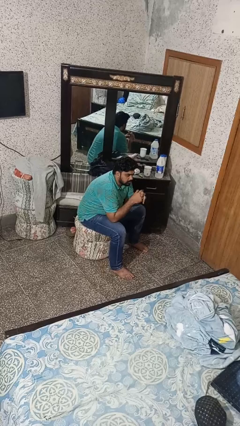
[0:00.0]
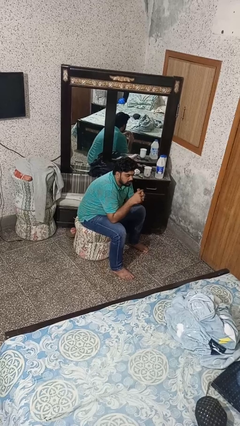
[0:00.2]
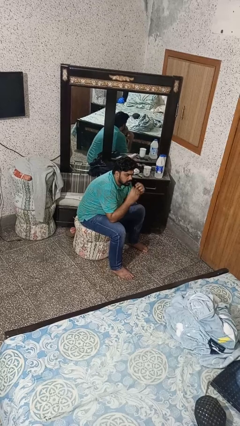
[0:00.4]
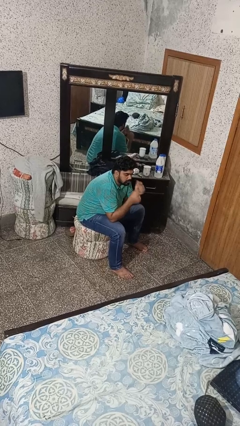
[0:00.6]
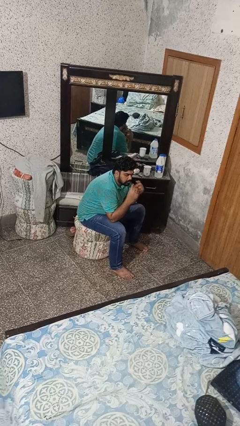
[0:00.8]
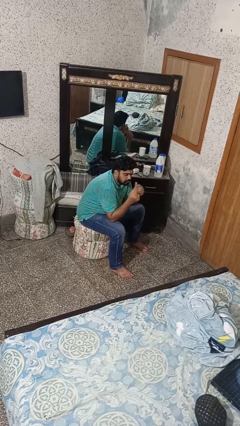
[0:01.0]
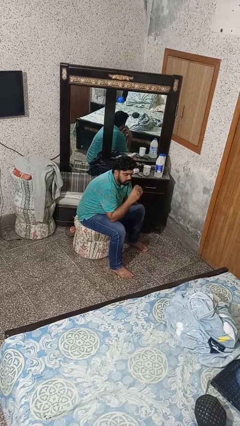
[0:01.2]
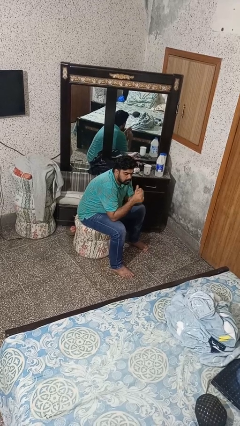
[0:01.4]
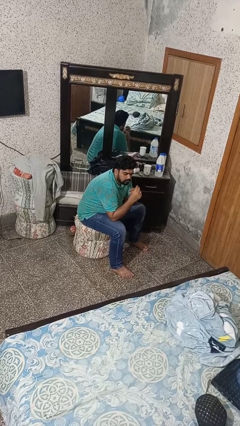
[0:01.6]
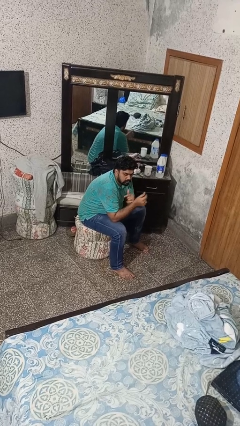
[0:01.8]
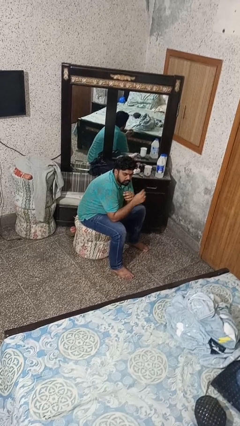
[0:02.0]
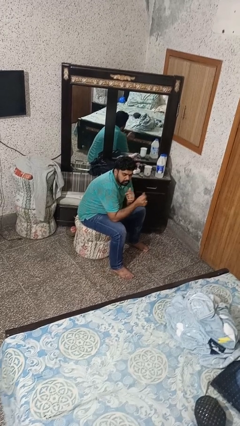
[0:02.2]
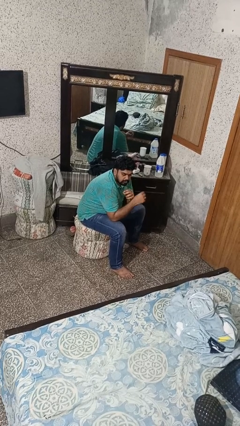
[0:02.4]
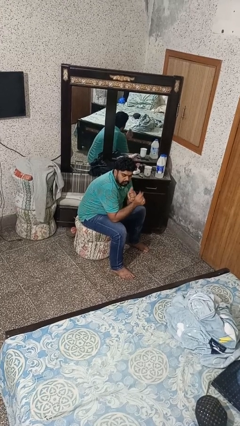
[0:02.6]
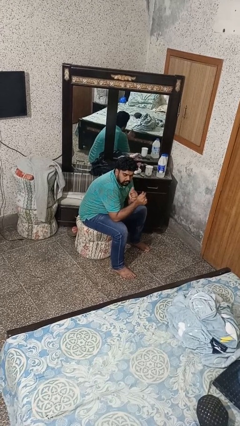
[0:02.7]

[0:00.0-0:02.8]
person snaps fingers

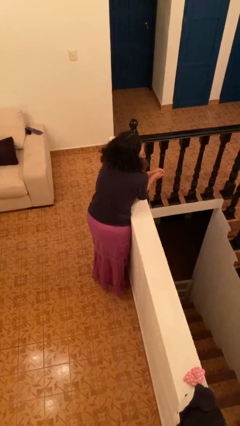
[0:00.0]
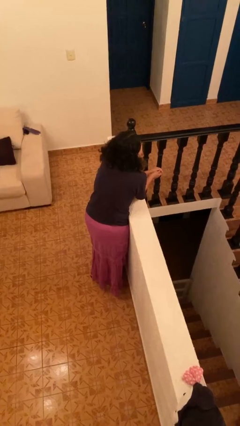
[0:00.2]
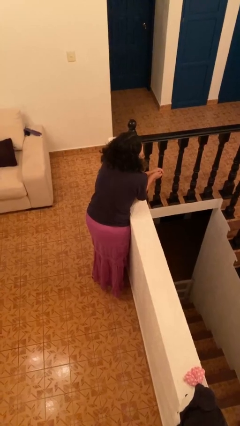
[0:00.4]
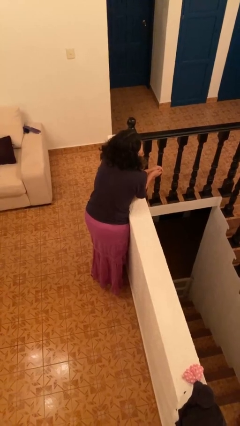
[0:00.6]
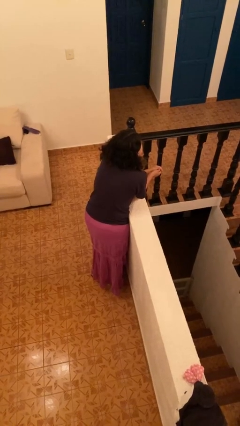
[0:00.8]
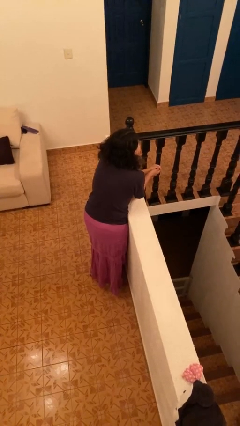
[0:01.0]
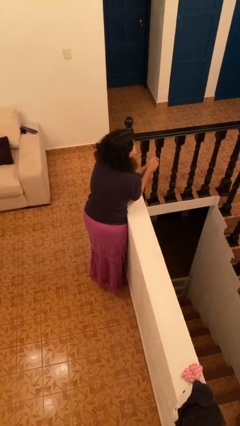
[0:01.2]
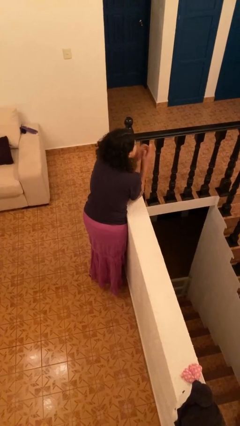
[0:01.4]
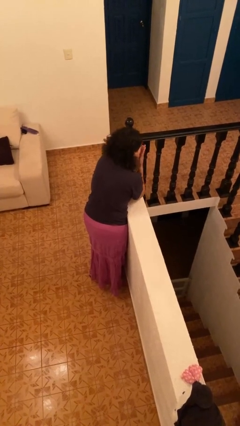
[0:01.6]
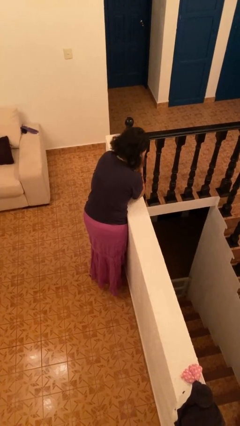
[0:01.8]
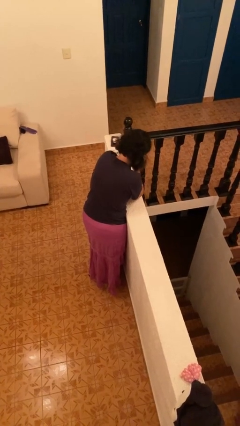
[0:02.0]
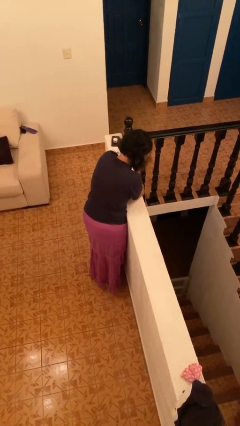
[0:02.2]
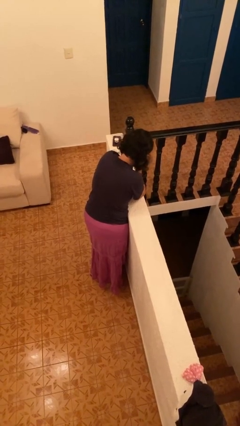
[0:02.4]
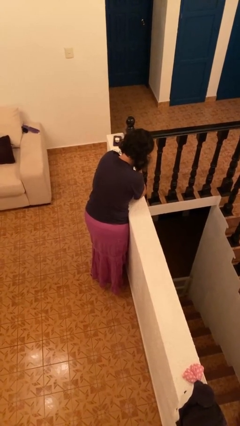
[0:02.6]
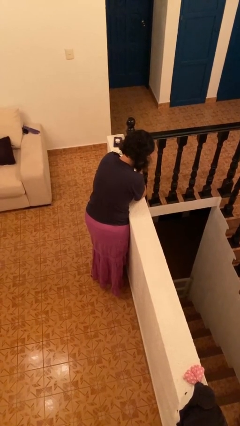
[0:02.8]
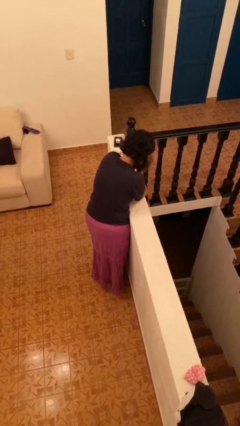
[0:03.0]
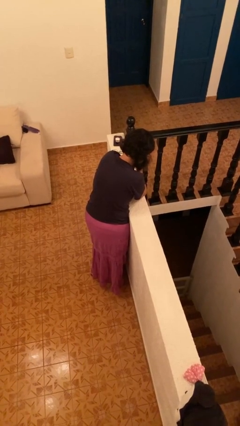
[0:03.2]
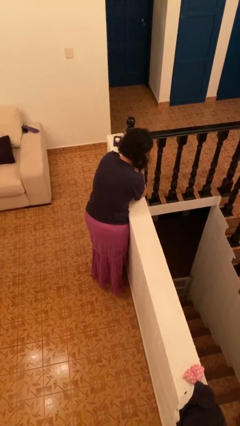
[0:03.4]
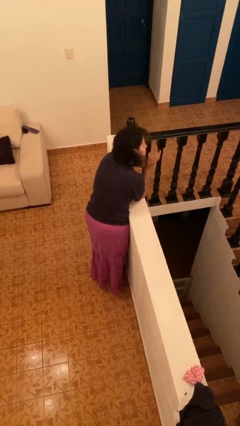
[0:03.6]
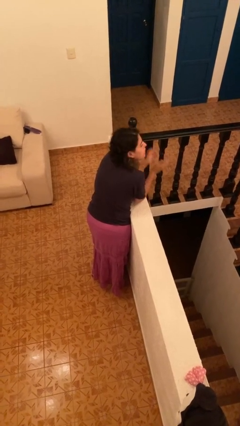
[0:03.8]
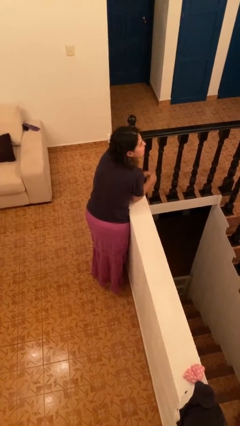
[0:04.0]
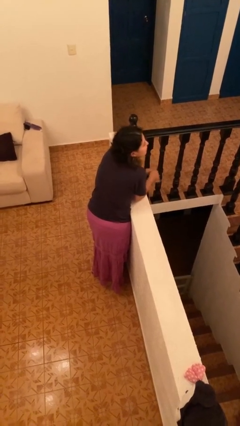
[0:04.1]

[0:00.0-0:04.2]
person covers face with hands

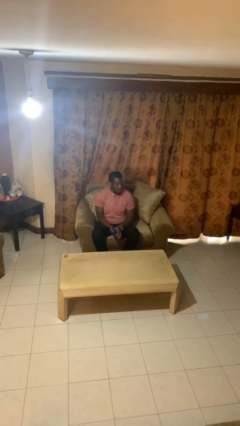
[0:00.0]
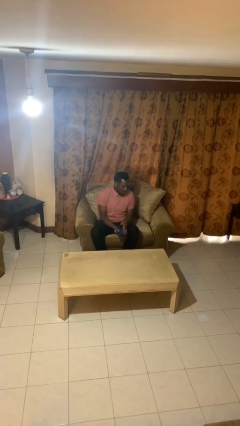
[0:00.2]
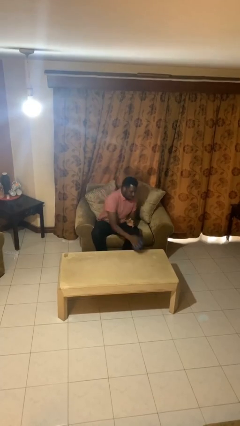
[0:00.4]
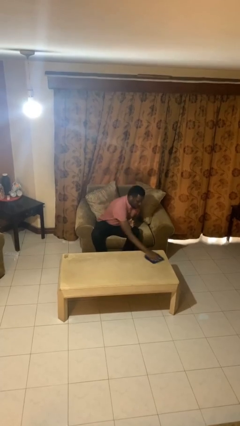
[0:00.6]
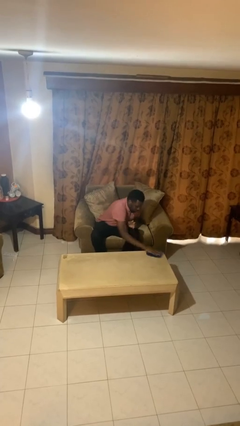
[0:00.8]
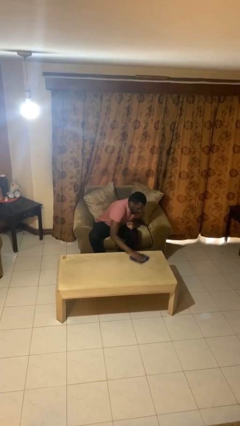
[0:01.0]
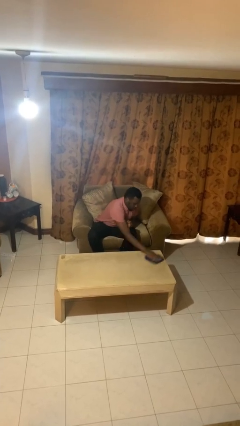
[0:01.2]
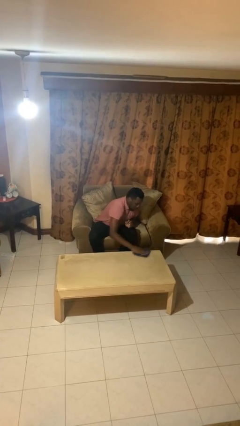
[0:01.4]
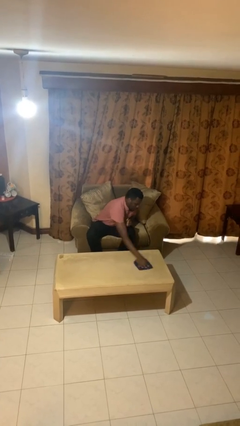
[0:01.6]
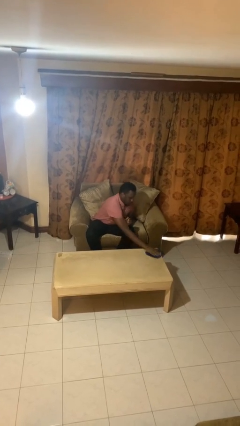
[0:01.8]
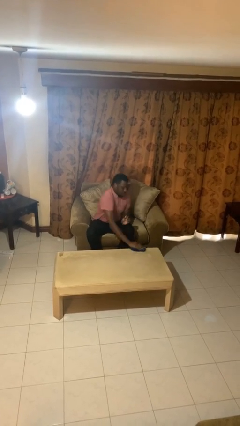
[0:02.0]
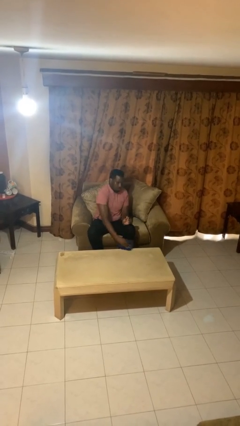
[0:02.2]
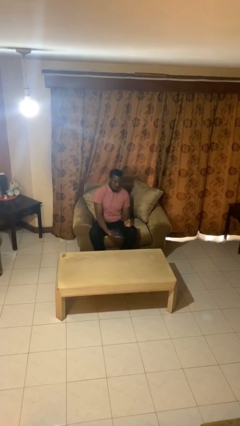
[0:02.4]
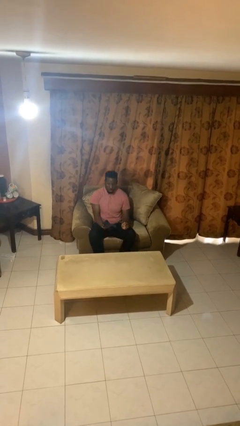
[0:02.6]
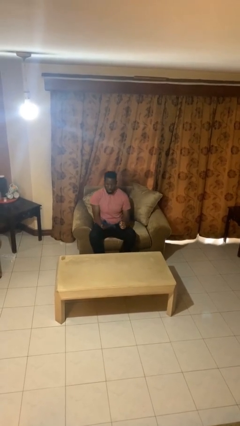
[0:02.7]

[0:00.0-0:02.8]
person cleans table with rag

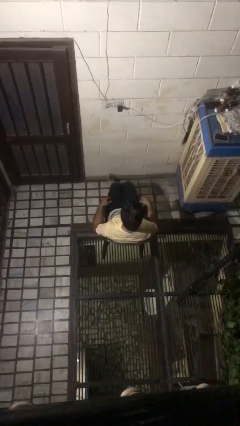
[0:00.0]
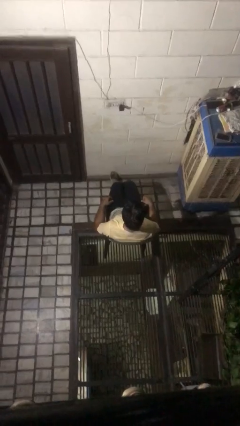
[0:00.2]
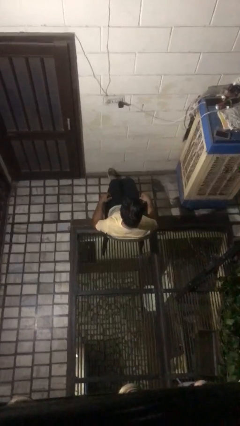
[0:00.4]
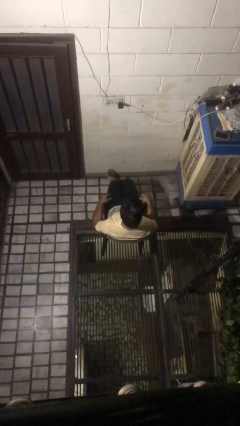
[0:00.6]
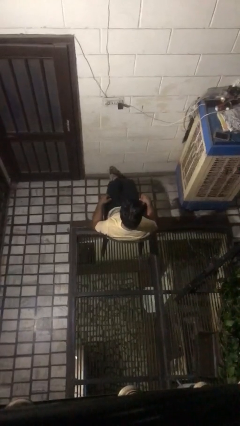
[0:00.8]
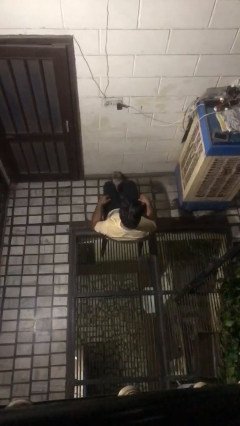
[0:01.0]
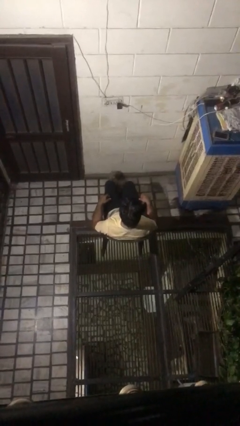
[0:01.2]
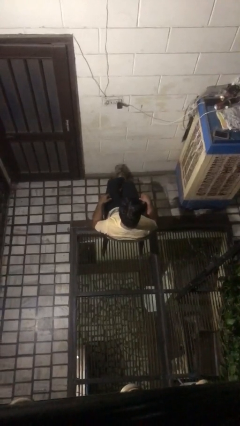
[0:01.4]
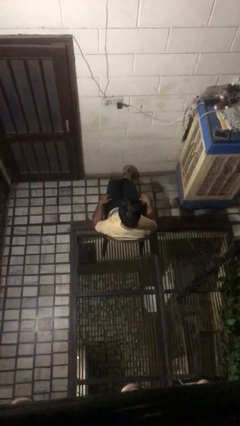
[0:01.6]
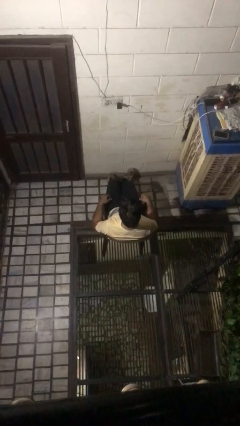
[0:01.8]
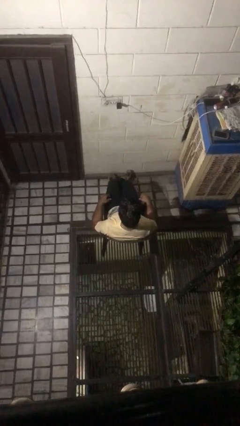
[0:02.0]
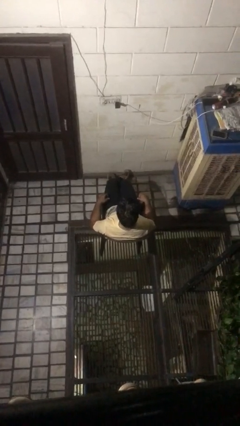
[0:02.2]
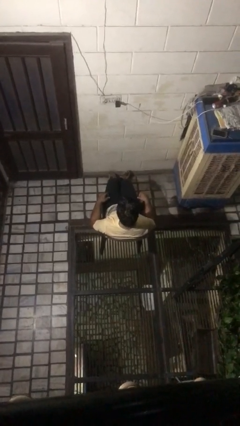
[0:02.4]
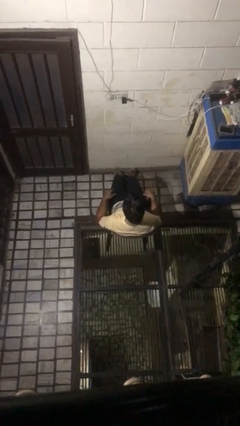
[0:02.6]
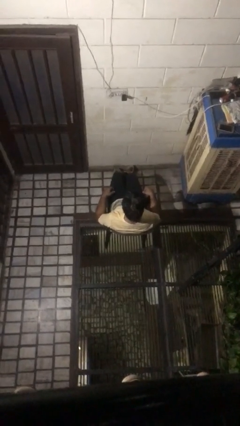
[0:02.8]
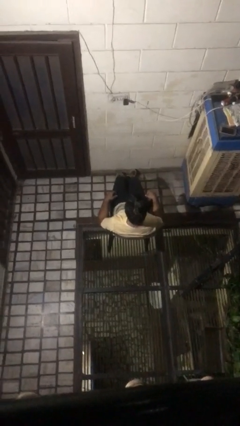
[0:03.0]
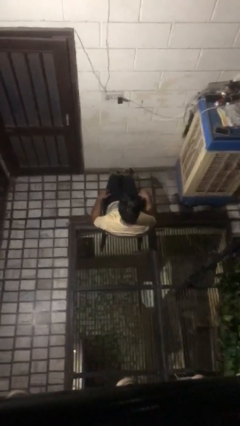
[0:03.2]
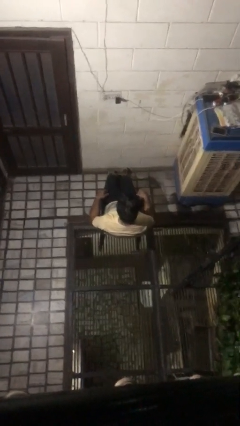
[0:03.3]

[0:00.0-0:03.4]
person crosses legs

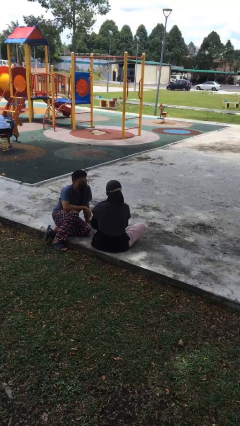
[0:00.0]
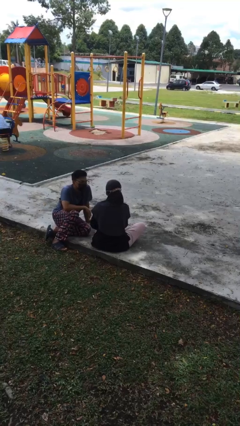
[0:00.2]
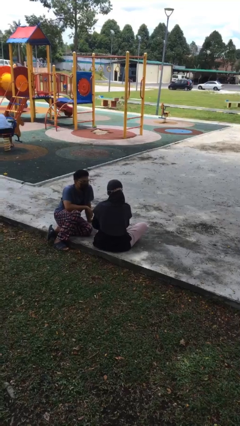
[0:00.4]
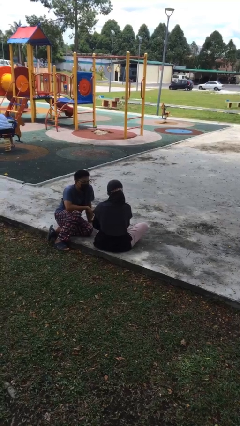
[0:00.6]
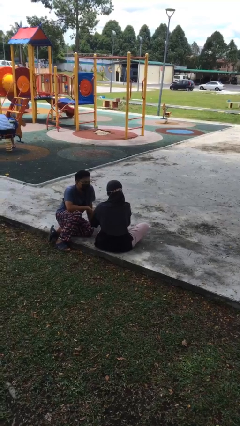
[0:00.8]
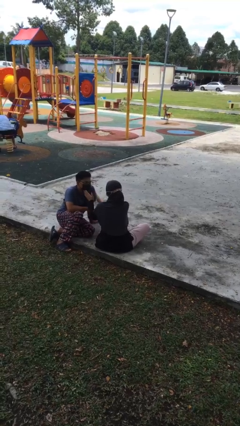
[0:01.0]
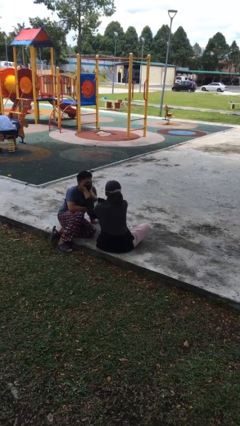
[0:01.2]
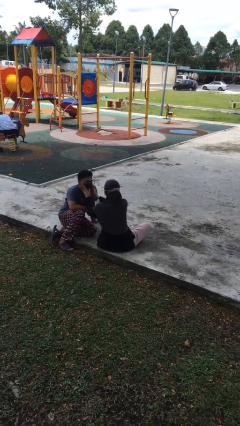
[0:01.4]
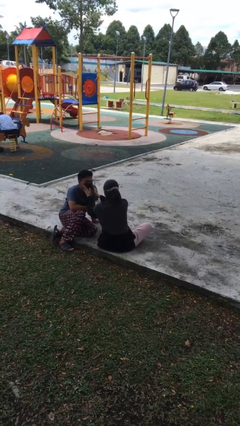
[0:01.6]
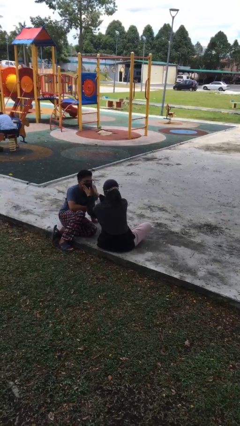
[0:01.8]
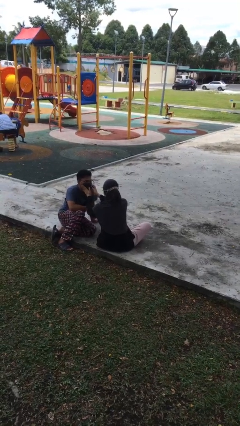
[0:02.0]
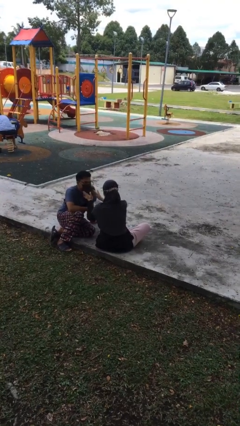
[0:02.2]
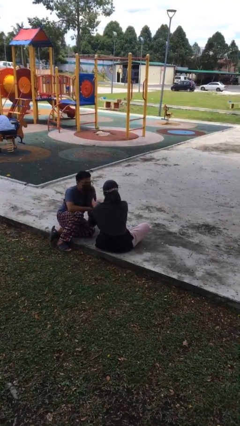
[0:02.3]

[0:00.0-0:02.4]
person touches face of person

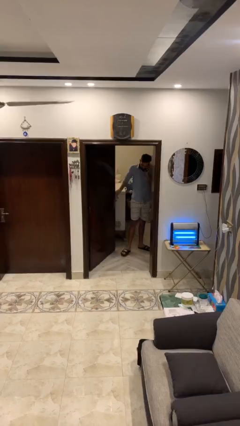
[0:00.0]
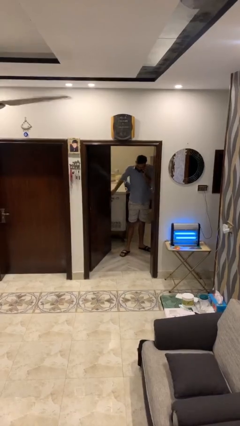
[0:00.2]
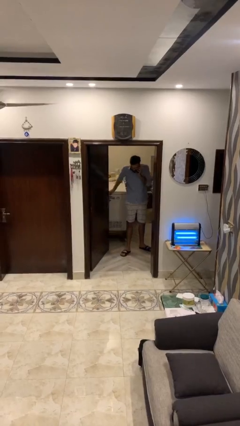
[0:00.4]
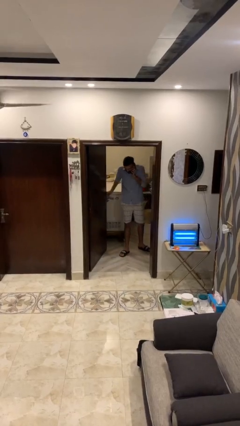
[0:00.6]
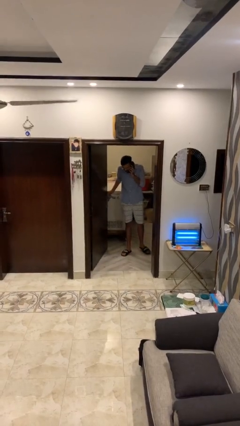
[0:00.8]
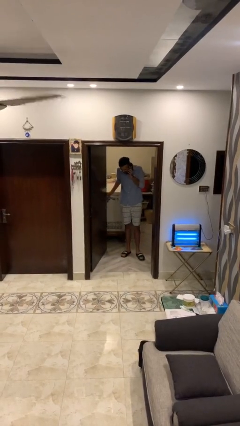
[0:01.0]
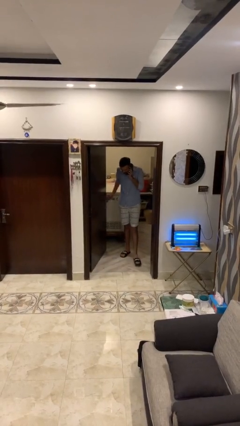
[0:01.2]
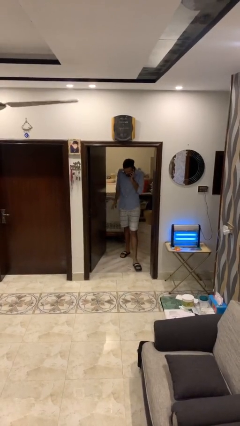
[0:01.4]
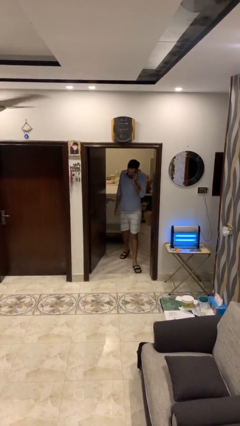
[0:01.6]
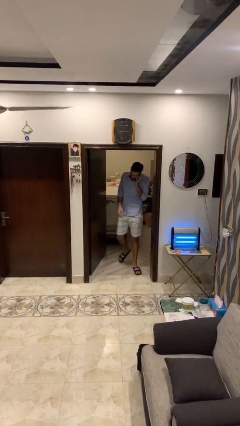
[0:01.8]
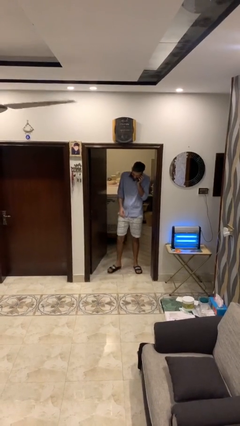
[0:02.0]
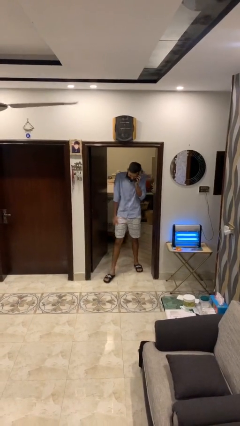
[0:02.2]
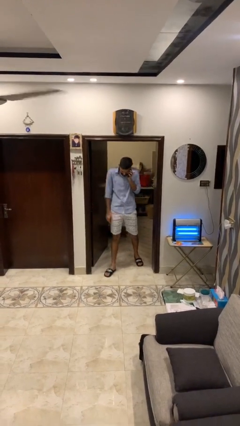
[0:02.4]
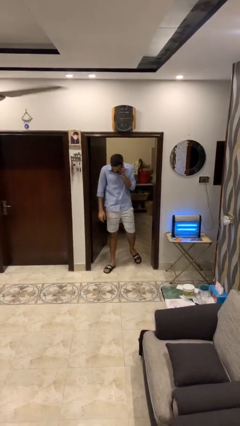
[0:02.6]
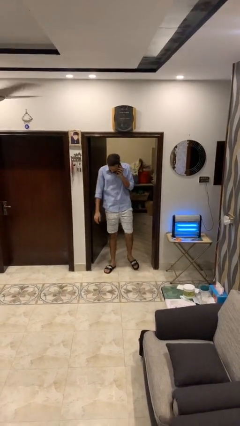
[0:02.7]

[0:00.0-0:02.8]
person enters scene through structure
